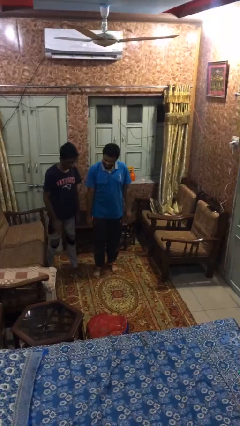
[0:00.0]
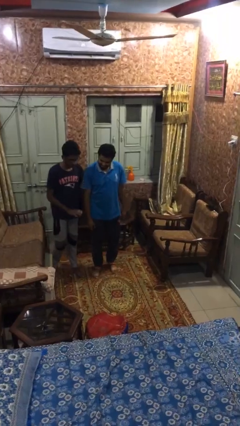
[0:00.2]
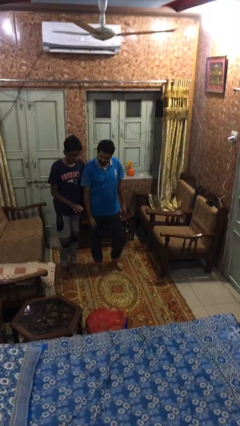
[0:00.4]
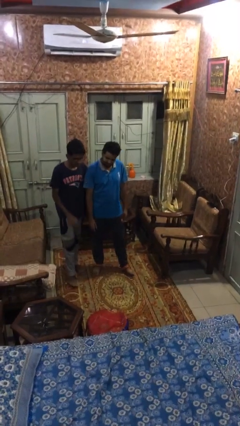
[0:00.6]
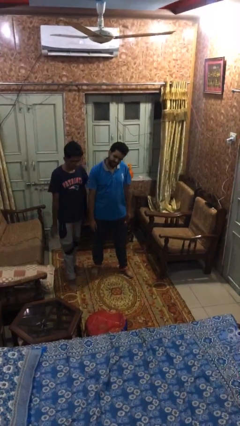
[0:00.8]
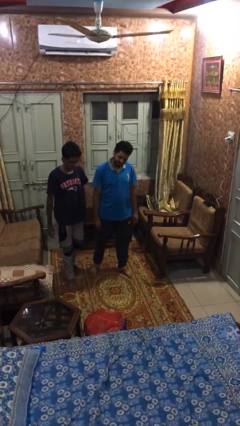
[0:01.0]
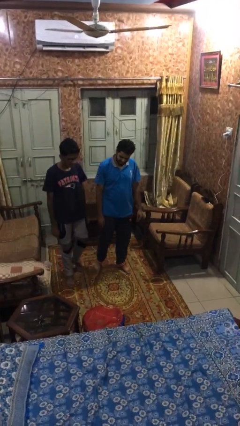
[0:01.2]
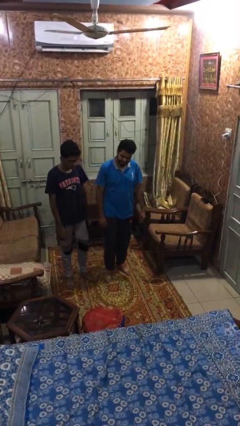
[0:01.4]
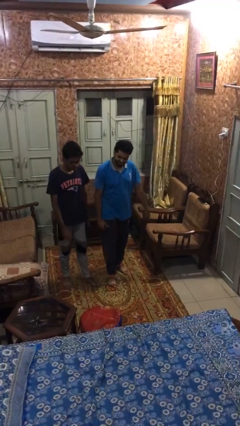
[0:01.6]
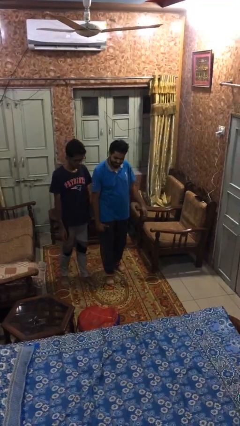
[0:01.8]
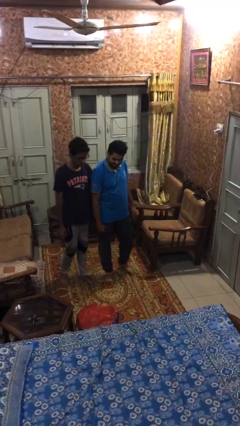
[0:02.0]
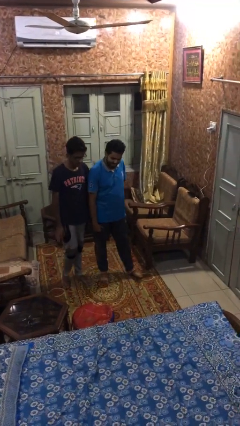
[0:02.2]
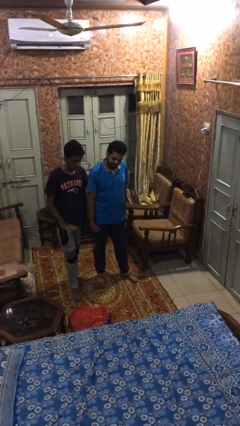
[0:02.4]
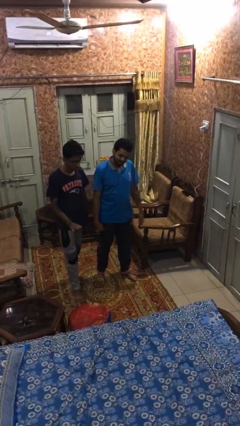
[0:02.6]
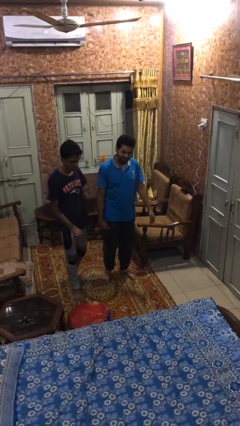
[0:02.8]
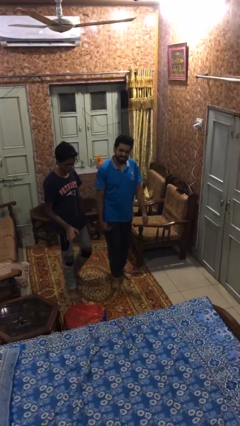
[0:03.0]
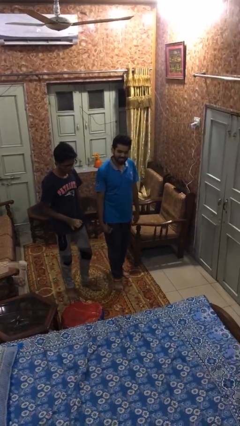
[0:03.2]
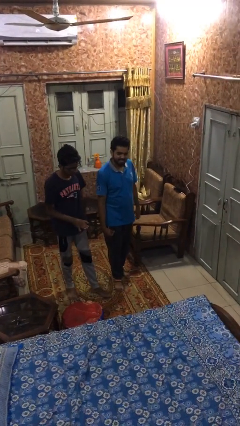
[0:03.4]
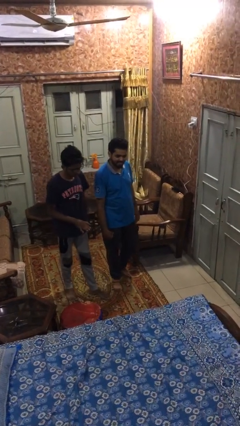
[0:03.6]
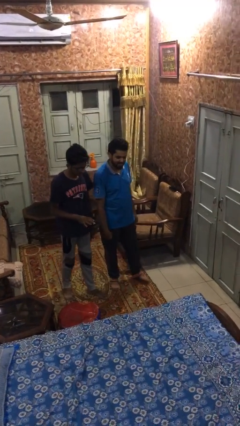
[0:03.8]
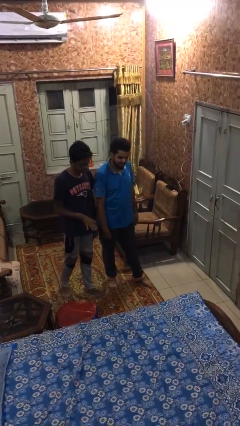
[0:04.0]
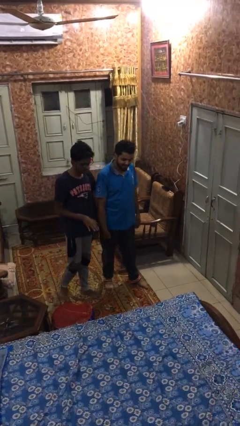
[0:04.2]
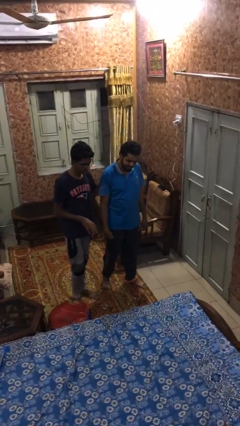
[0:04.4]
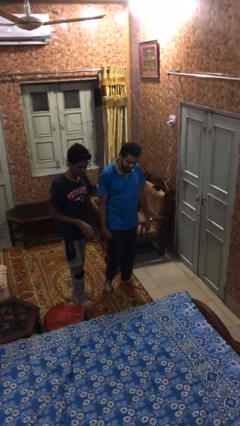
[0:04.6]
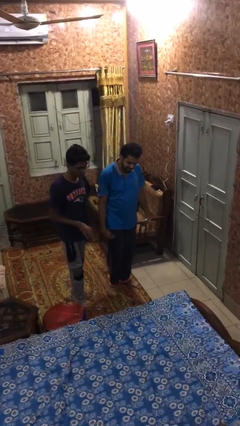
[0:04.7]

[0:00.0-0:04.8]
person talks to person

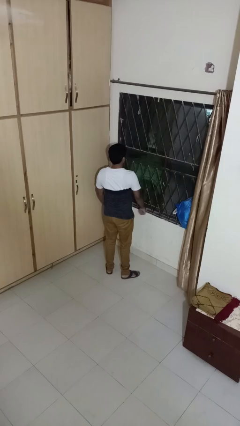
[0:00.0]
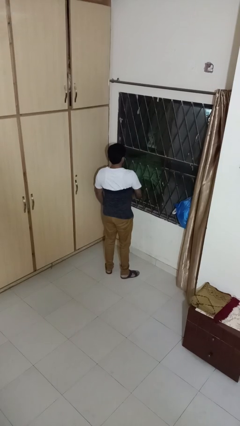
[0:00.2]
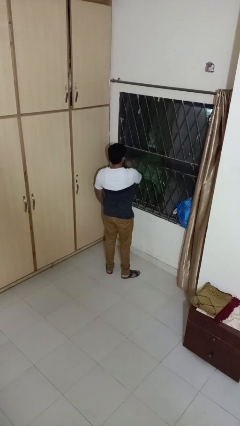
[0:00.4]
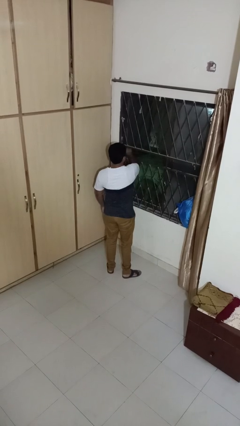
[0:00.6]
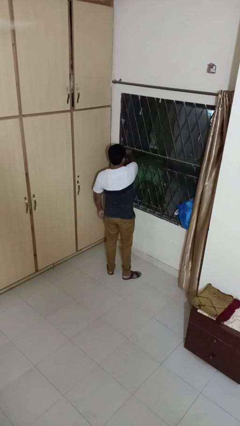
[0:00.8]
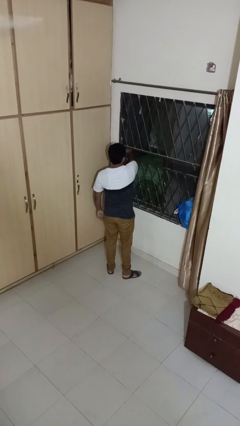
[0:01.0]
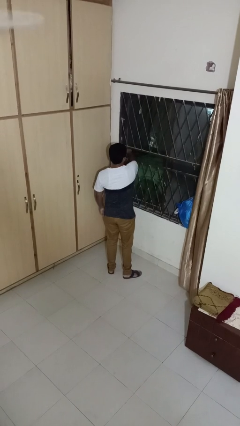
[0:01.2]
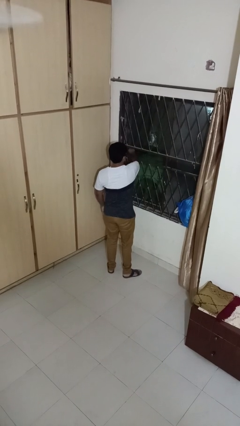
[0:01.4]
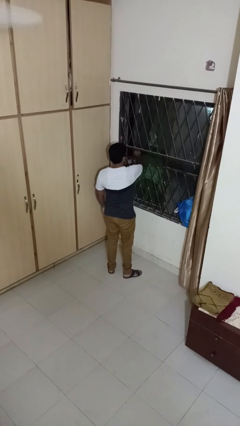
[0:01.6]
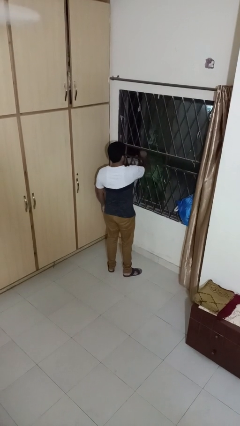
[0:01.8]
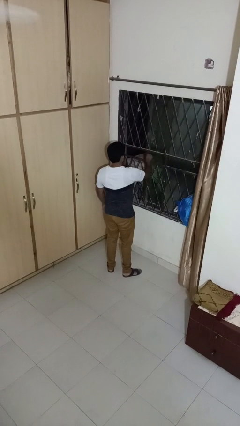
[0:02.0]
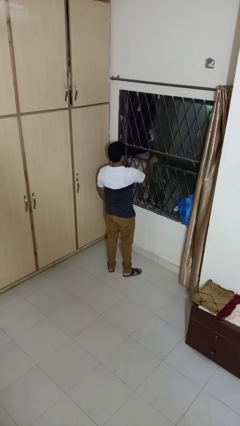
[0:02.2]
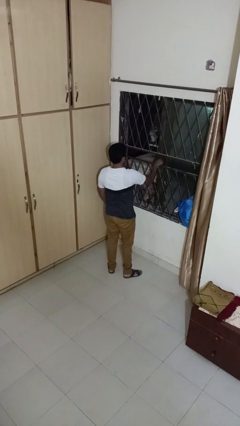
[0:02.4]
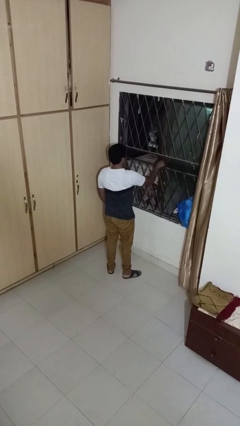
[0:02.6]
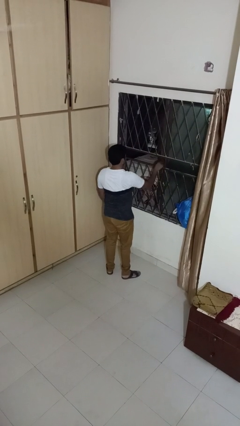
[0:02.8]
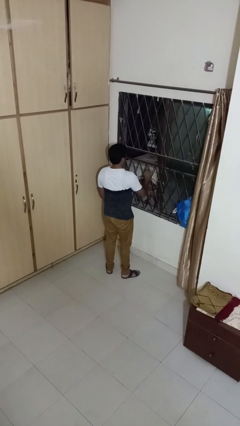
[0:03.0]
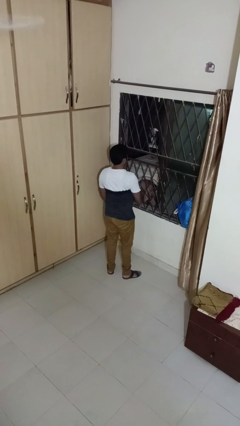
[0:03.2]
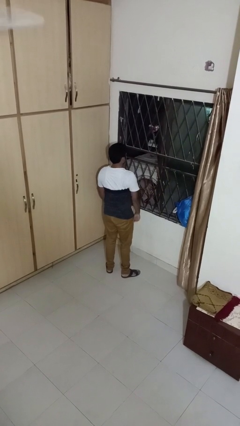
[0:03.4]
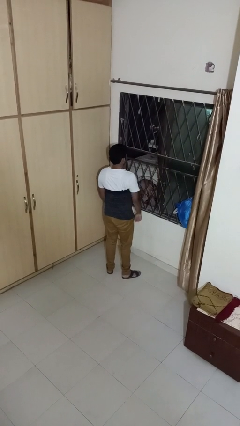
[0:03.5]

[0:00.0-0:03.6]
person opens home window

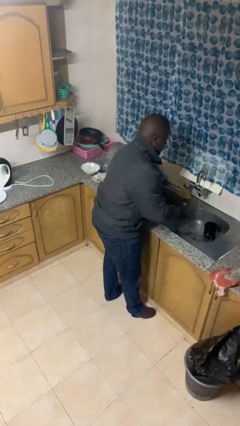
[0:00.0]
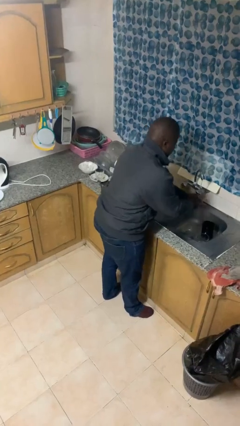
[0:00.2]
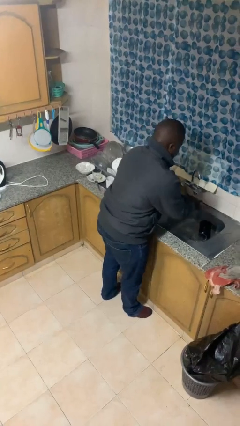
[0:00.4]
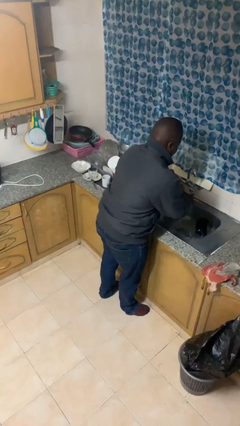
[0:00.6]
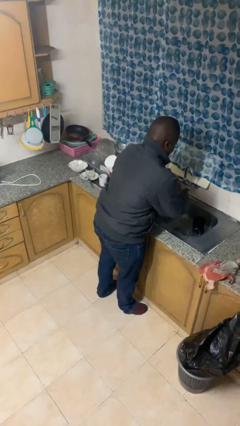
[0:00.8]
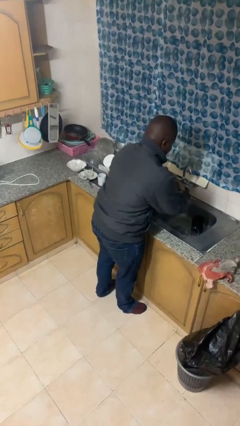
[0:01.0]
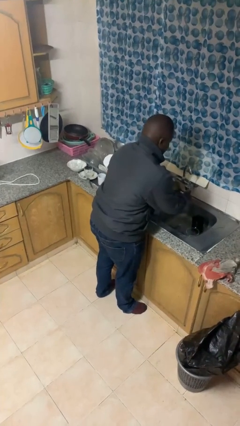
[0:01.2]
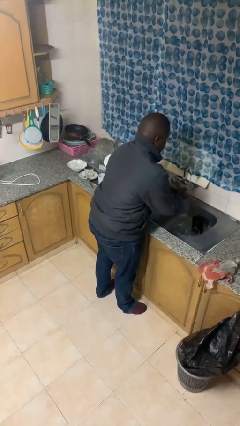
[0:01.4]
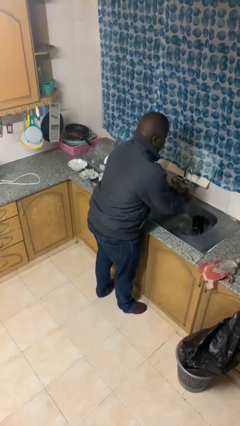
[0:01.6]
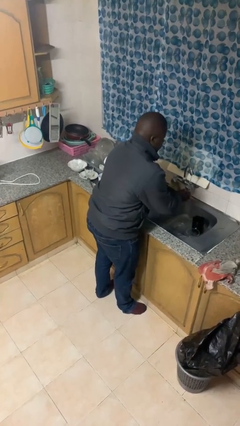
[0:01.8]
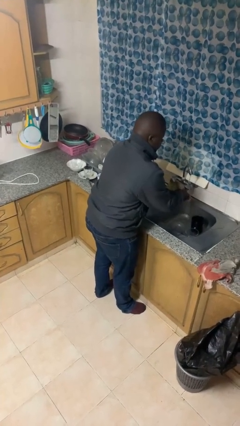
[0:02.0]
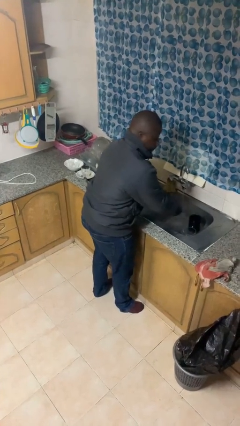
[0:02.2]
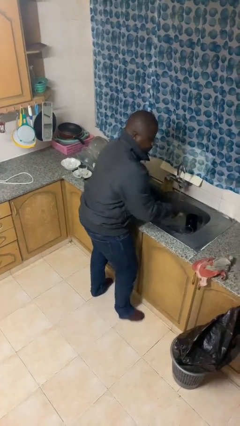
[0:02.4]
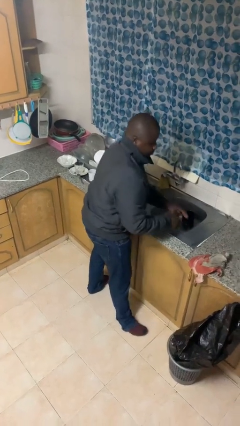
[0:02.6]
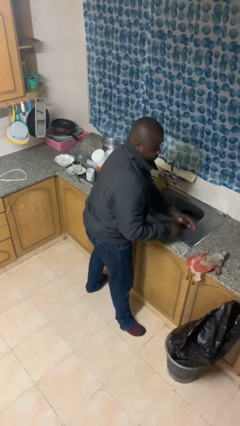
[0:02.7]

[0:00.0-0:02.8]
person washes hands

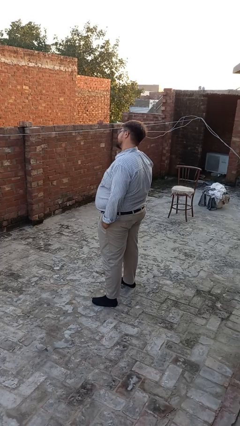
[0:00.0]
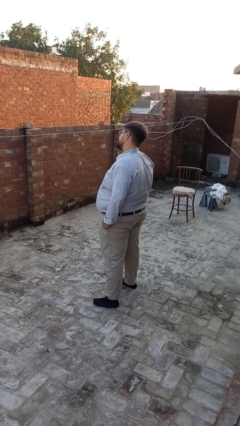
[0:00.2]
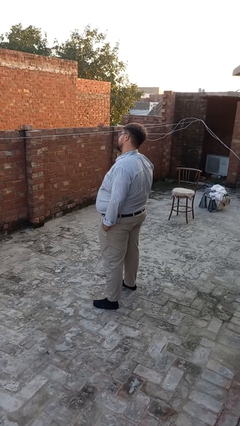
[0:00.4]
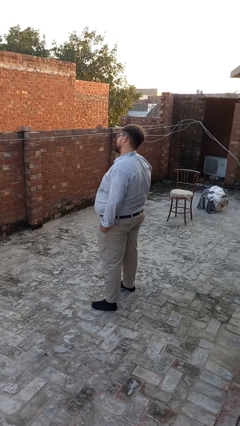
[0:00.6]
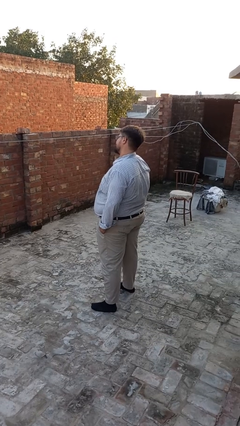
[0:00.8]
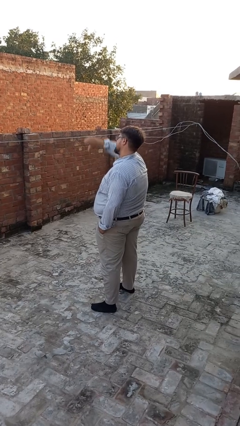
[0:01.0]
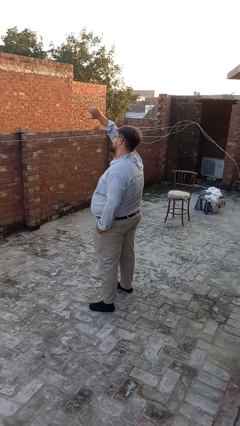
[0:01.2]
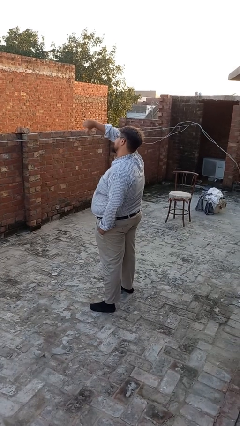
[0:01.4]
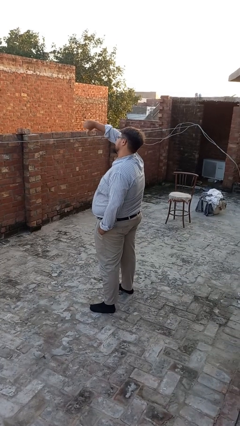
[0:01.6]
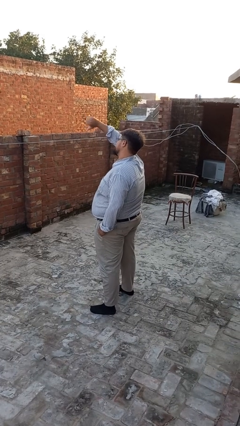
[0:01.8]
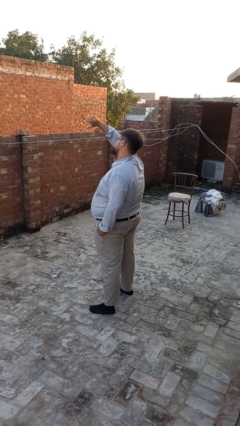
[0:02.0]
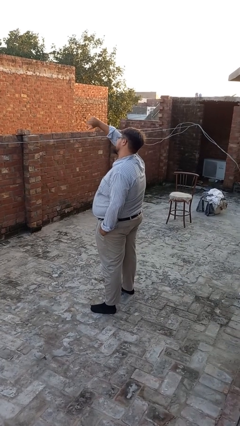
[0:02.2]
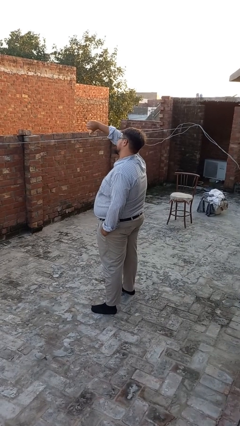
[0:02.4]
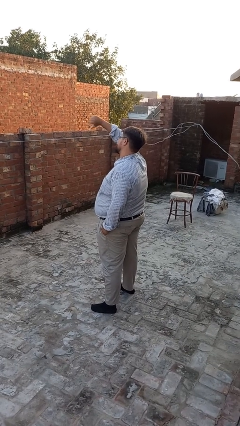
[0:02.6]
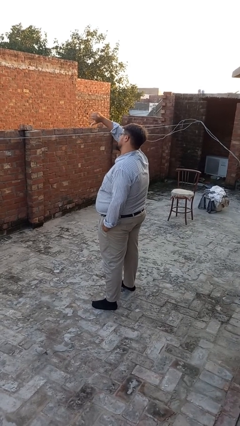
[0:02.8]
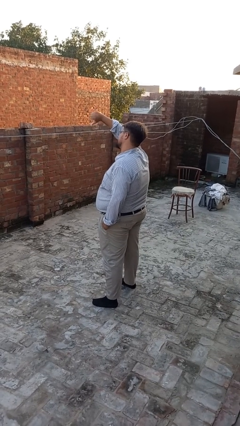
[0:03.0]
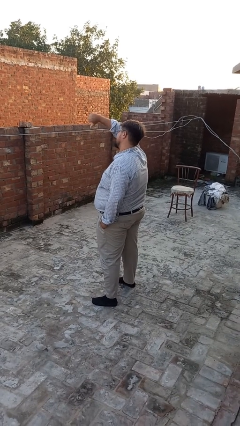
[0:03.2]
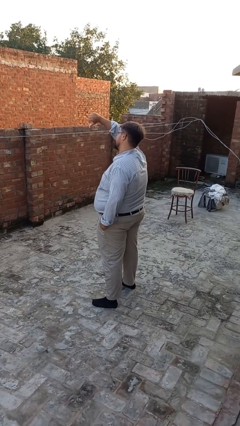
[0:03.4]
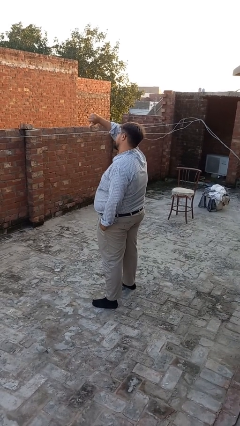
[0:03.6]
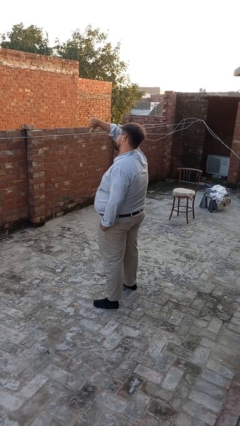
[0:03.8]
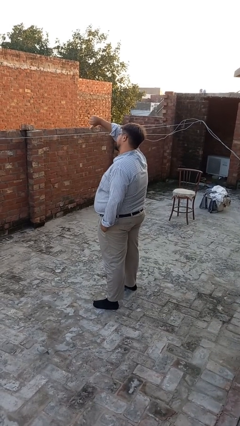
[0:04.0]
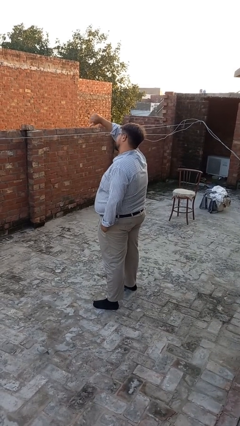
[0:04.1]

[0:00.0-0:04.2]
person gestures thumbs down

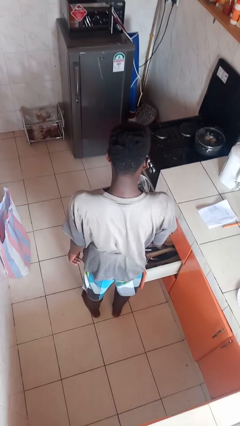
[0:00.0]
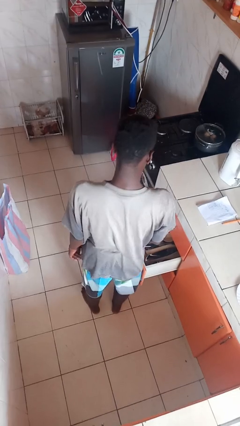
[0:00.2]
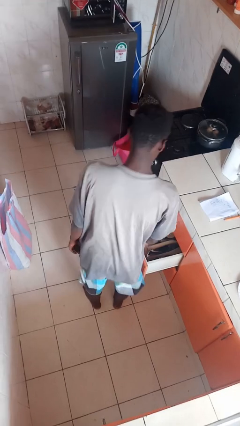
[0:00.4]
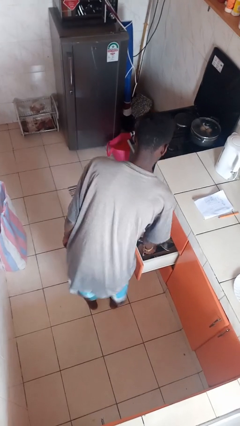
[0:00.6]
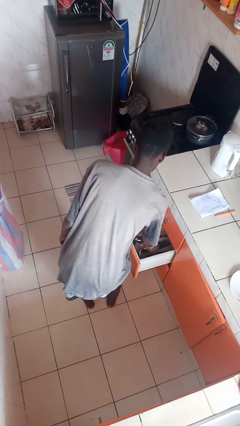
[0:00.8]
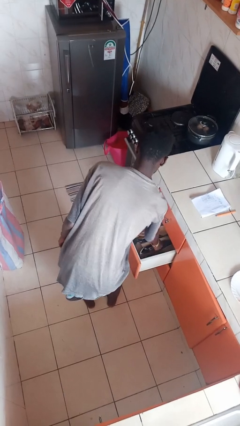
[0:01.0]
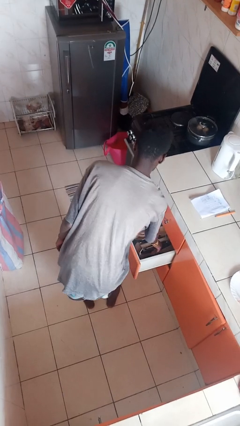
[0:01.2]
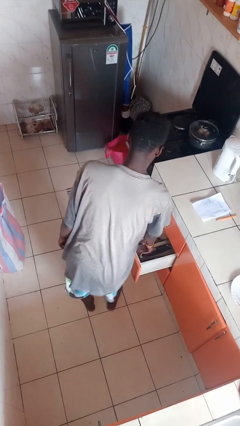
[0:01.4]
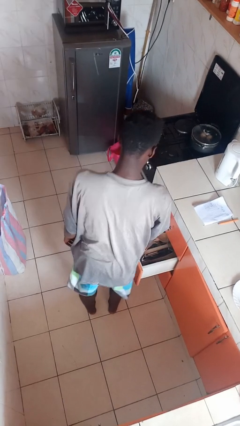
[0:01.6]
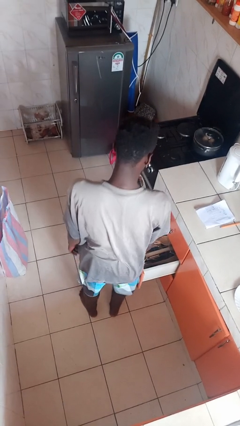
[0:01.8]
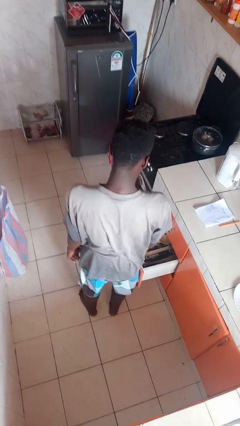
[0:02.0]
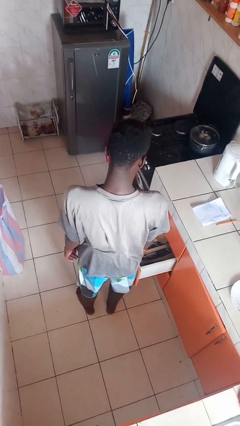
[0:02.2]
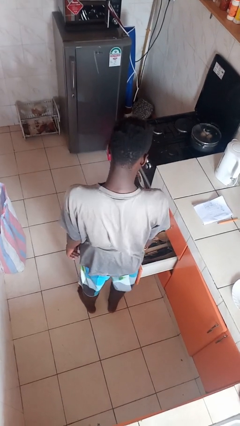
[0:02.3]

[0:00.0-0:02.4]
person puts object into kitchen drawer
